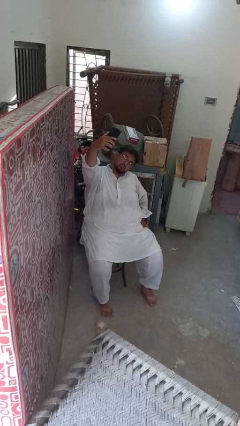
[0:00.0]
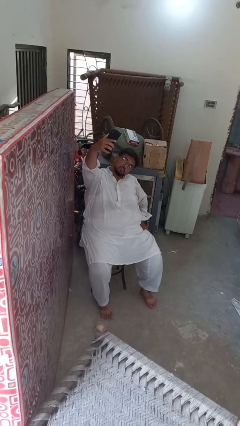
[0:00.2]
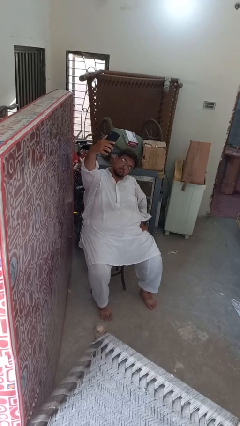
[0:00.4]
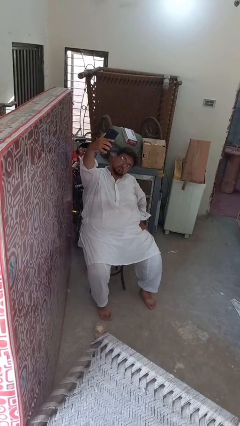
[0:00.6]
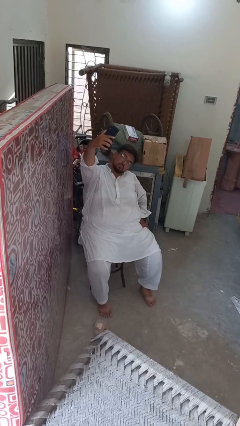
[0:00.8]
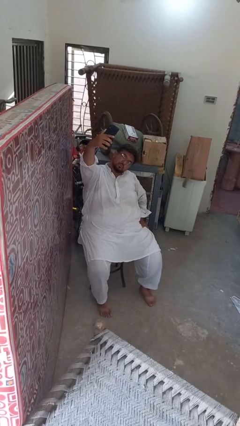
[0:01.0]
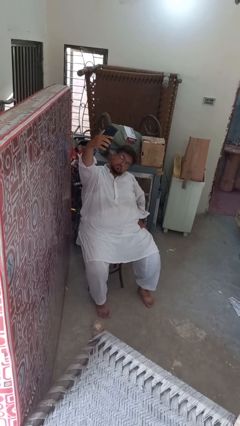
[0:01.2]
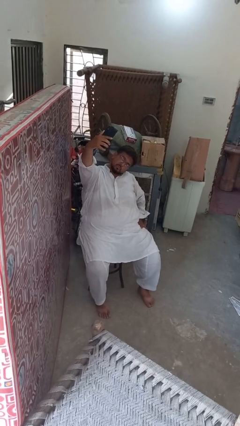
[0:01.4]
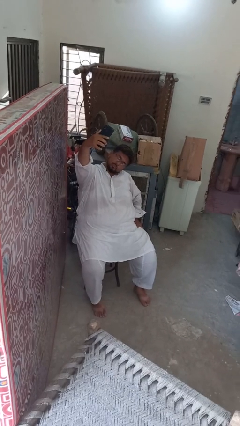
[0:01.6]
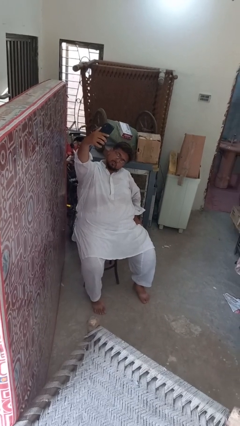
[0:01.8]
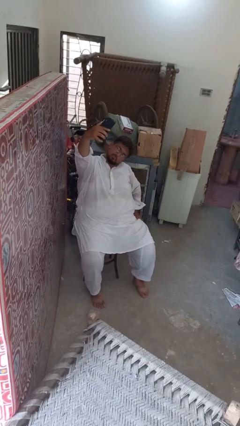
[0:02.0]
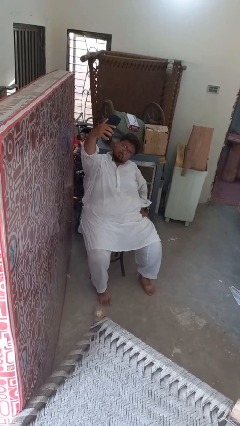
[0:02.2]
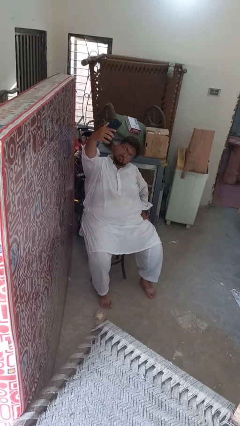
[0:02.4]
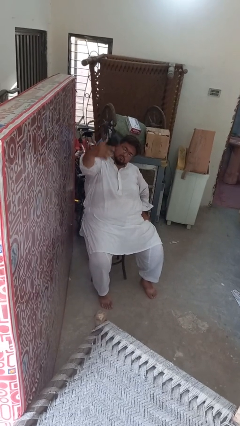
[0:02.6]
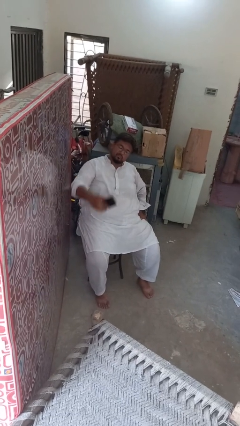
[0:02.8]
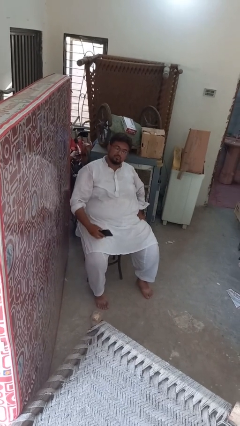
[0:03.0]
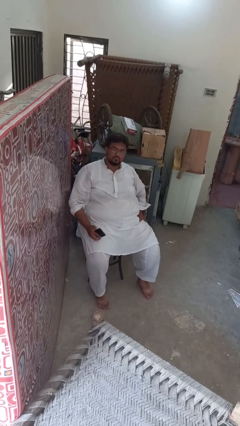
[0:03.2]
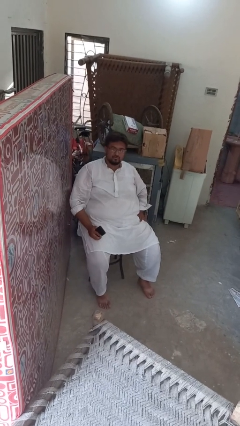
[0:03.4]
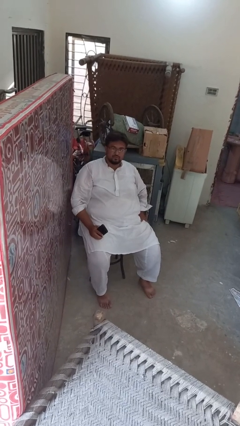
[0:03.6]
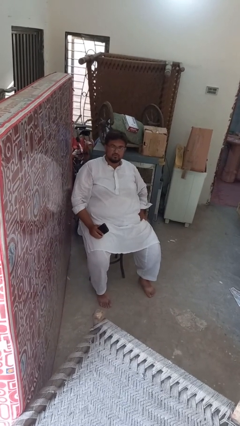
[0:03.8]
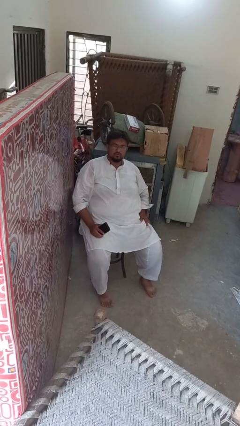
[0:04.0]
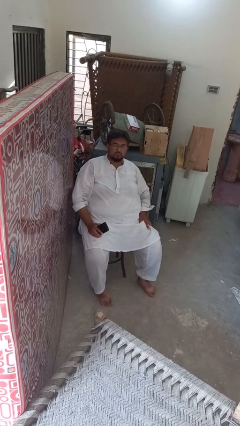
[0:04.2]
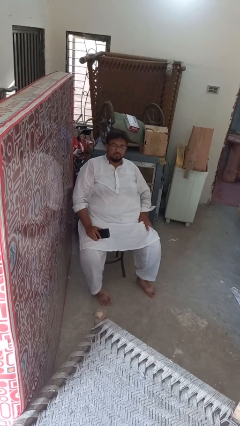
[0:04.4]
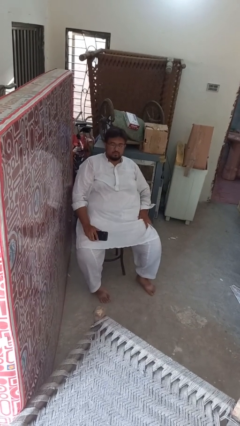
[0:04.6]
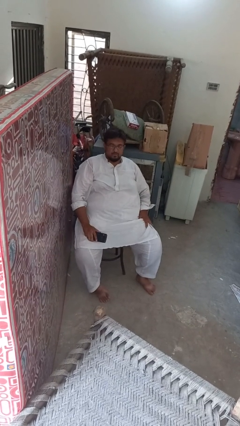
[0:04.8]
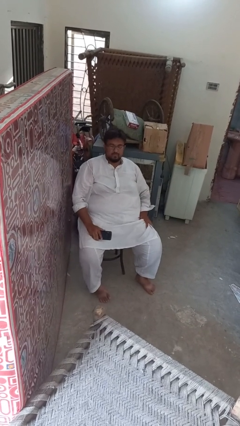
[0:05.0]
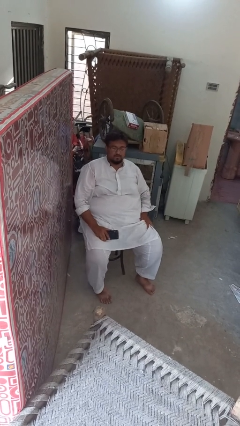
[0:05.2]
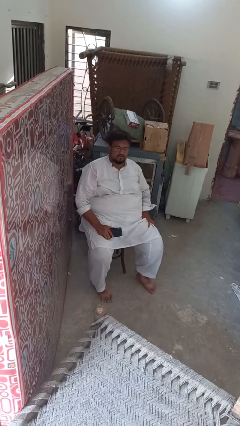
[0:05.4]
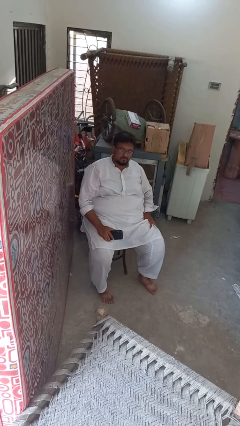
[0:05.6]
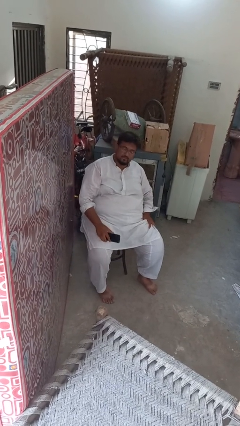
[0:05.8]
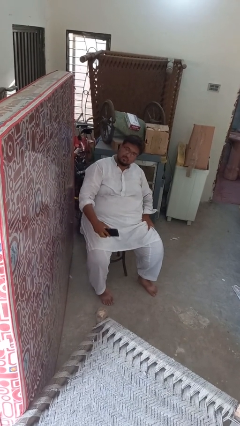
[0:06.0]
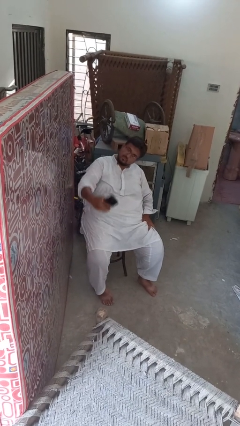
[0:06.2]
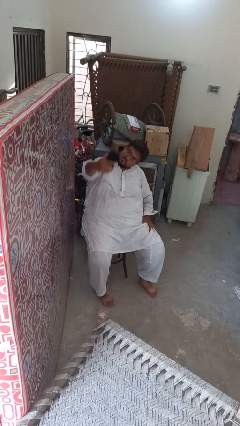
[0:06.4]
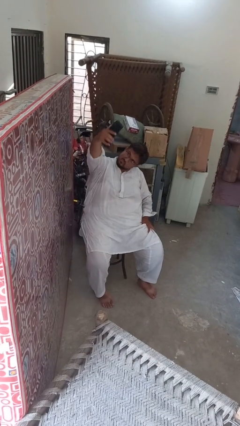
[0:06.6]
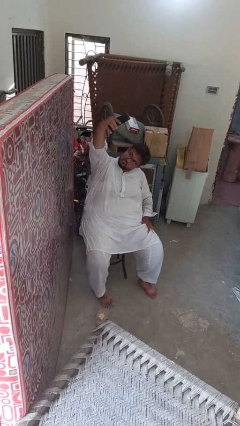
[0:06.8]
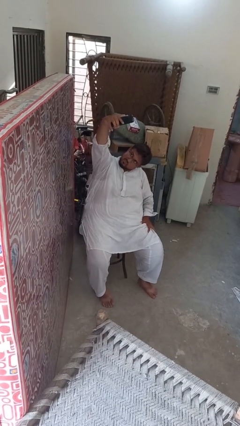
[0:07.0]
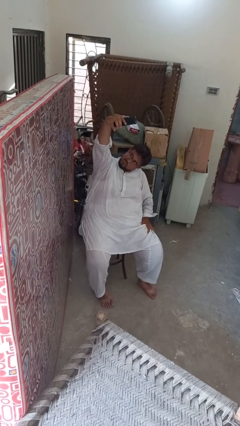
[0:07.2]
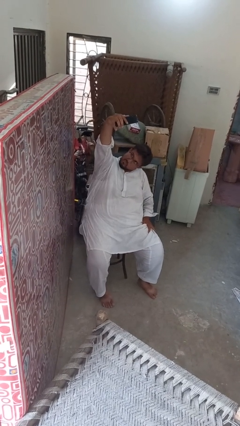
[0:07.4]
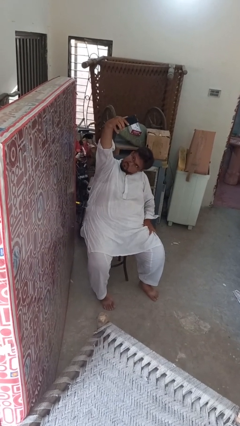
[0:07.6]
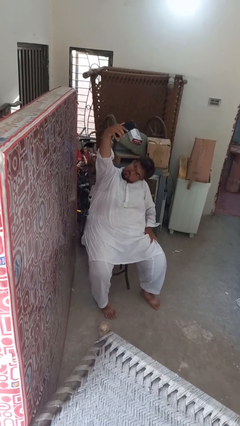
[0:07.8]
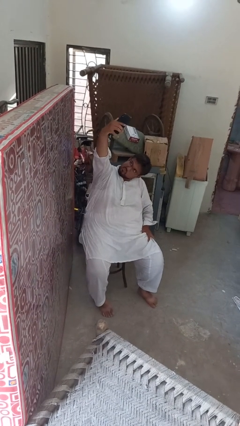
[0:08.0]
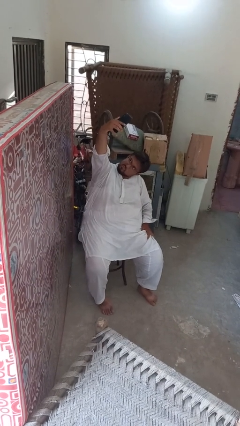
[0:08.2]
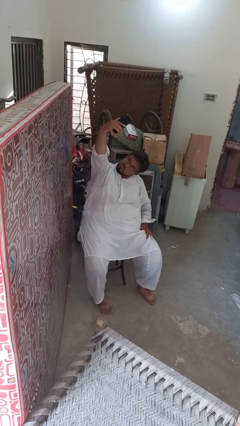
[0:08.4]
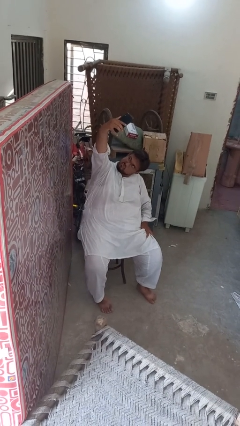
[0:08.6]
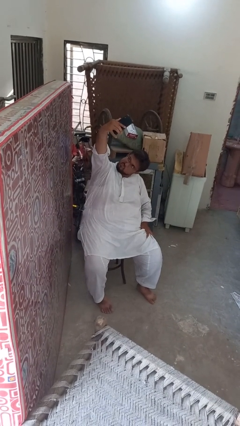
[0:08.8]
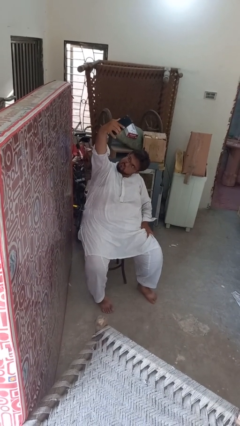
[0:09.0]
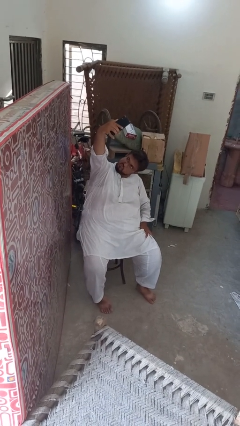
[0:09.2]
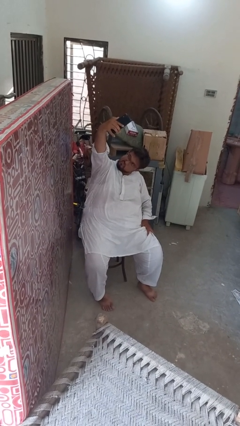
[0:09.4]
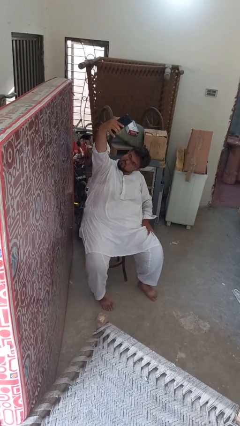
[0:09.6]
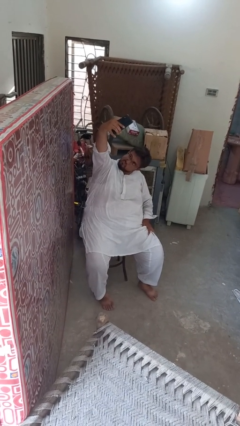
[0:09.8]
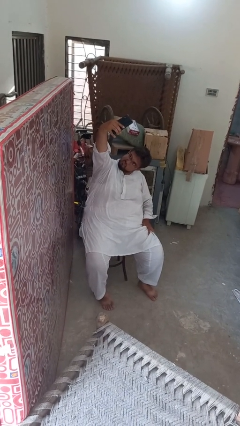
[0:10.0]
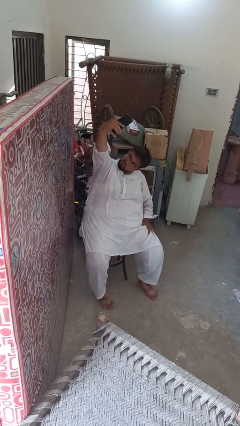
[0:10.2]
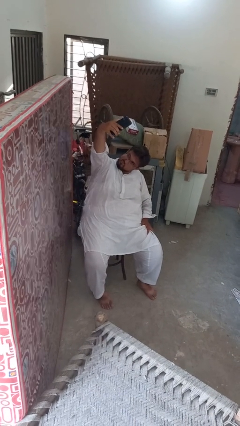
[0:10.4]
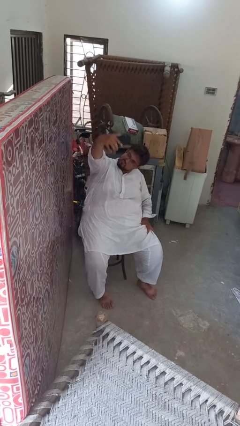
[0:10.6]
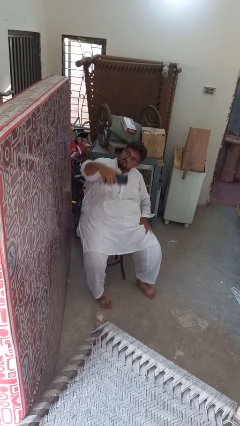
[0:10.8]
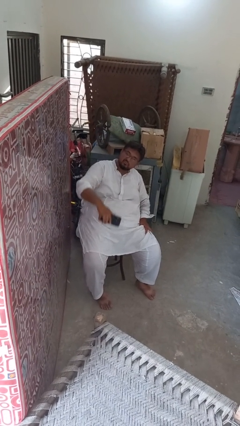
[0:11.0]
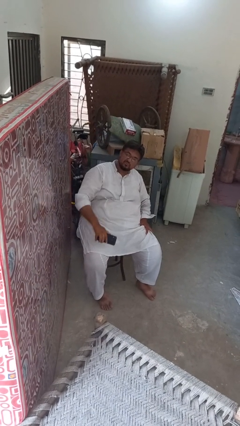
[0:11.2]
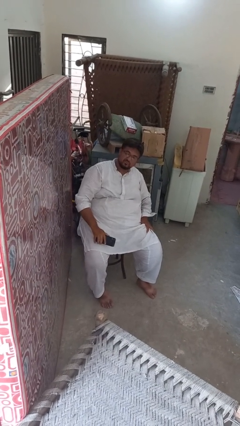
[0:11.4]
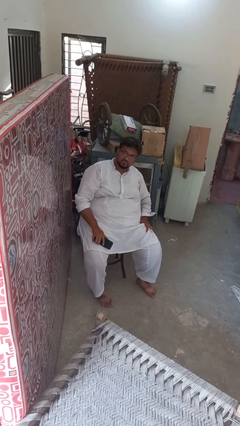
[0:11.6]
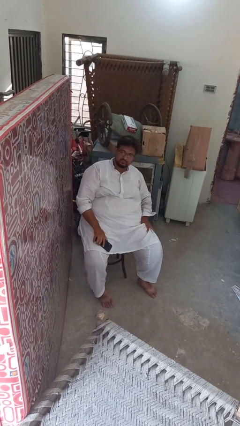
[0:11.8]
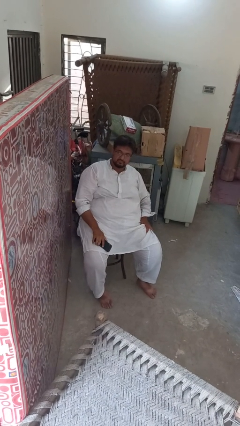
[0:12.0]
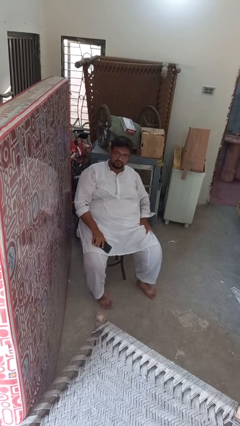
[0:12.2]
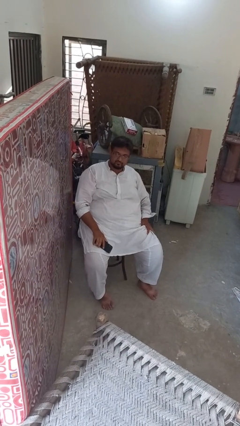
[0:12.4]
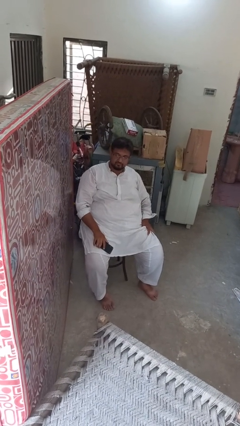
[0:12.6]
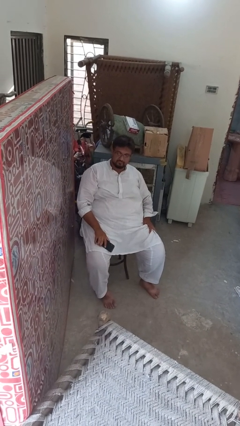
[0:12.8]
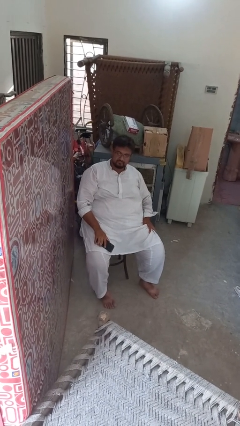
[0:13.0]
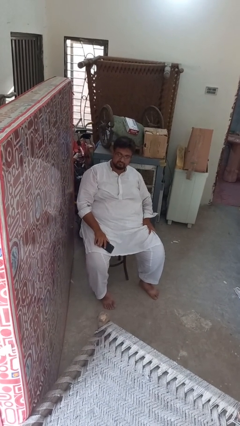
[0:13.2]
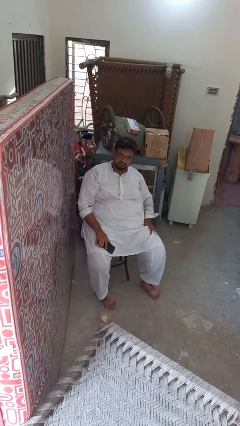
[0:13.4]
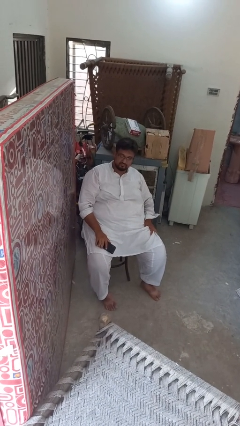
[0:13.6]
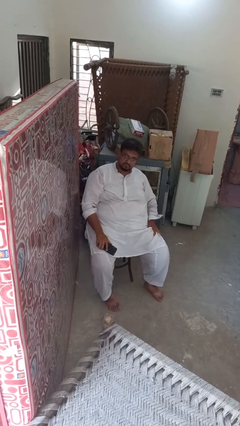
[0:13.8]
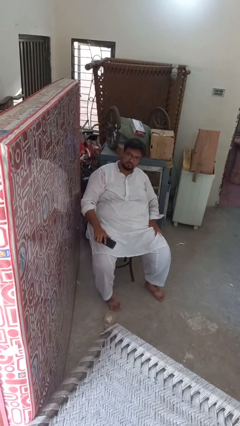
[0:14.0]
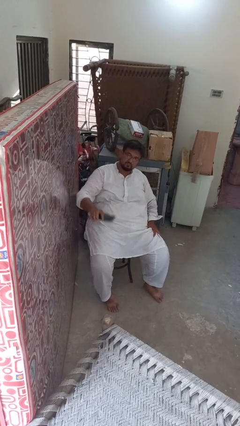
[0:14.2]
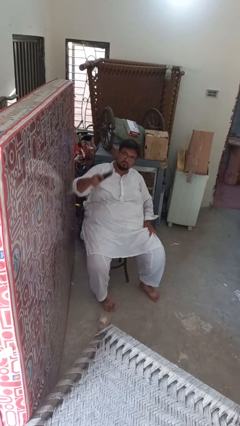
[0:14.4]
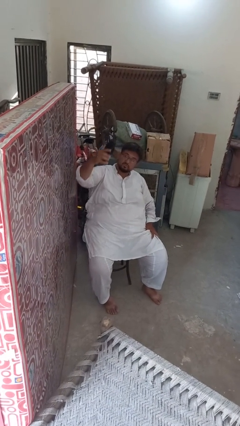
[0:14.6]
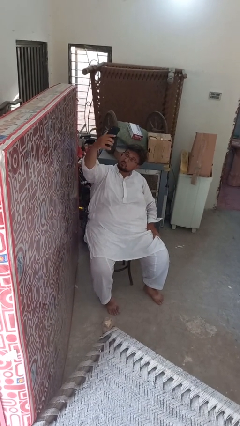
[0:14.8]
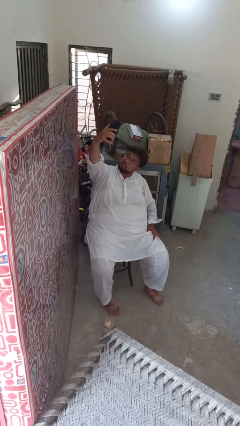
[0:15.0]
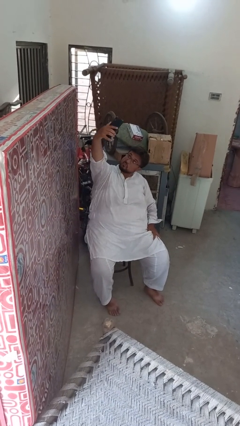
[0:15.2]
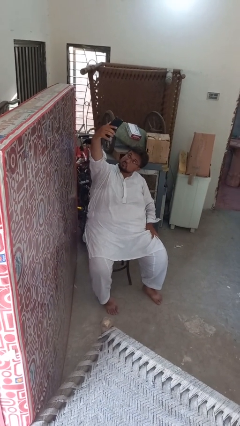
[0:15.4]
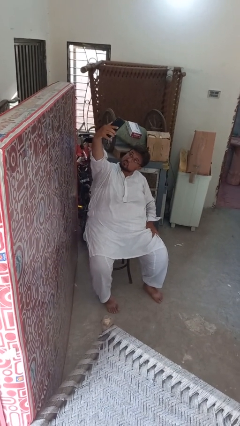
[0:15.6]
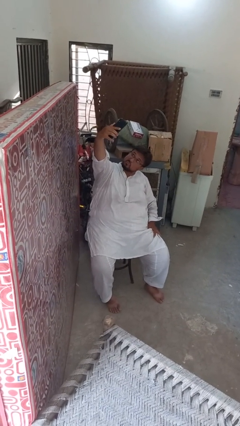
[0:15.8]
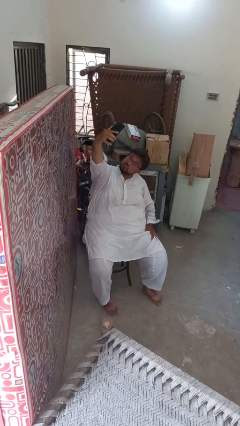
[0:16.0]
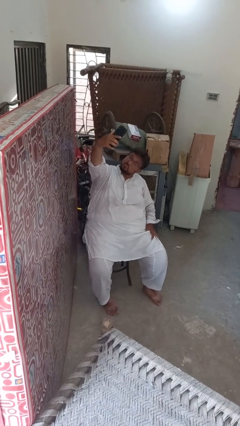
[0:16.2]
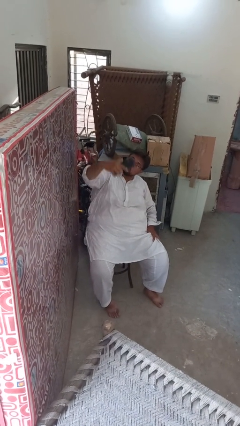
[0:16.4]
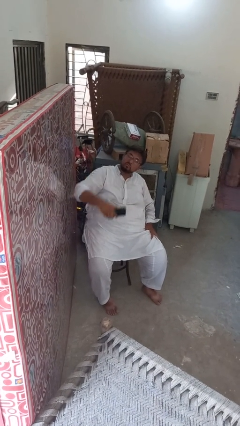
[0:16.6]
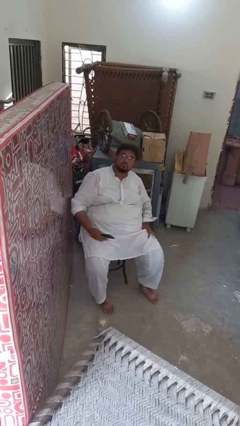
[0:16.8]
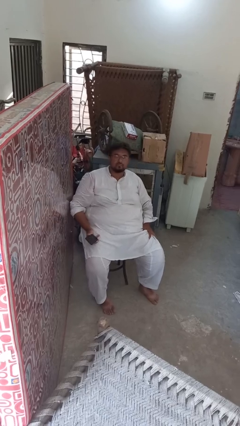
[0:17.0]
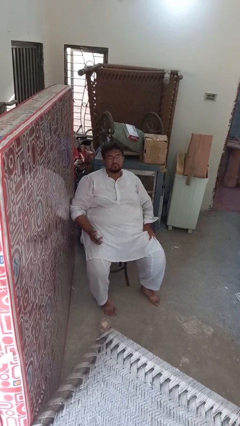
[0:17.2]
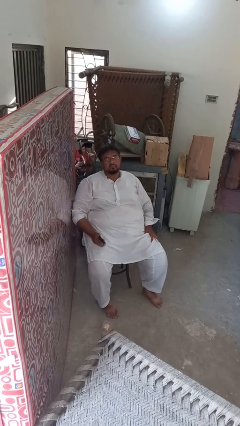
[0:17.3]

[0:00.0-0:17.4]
person takes selfie

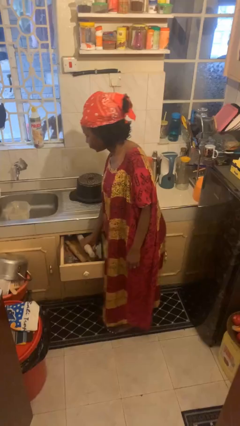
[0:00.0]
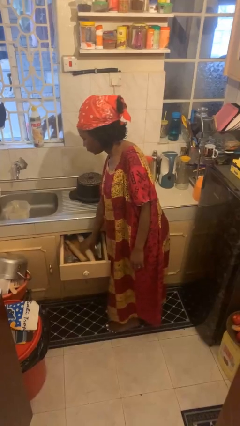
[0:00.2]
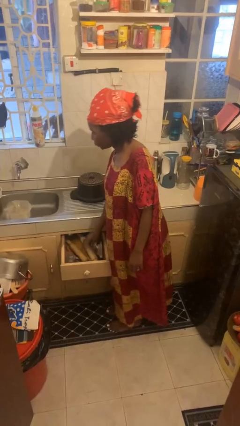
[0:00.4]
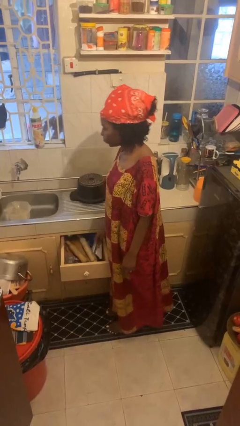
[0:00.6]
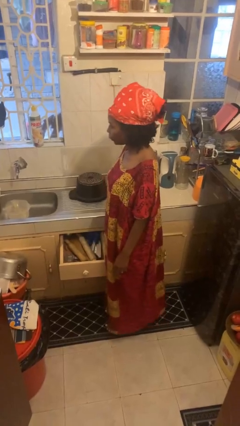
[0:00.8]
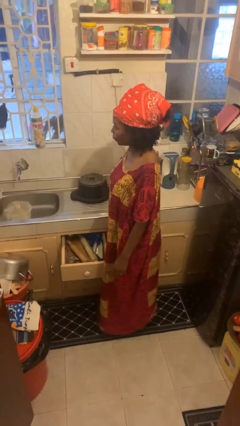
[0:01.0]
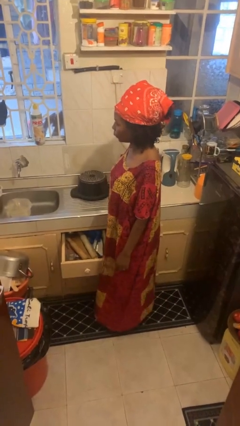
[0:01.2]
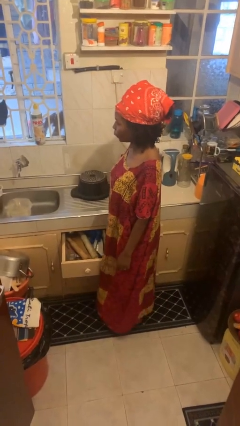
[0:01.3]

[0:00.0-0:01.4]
person puts object into kitchen drawer
